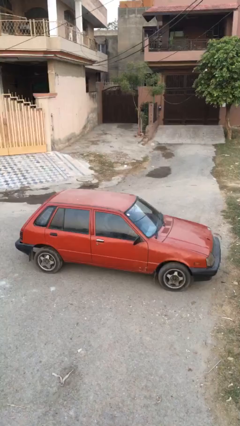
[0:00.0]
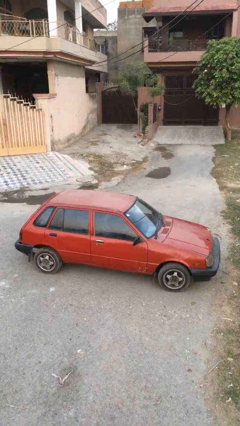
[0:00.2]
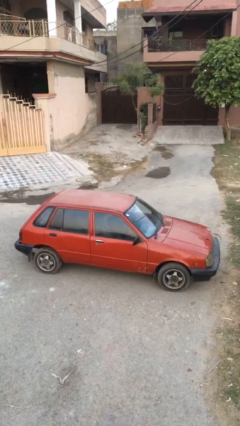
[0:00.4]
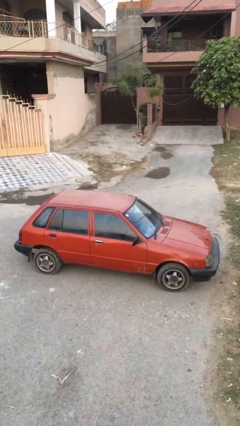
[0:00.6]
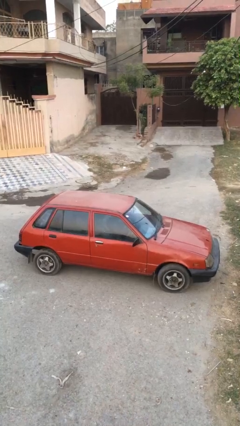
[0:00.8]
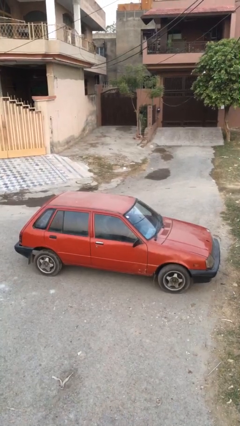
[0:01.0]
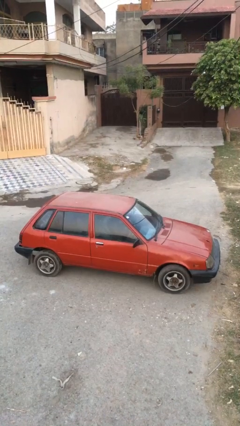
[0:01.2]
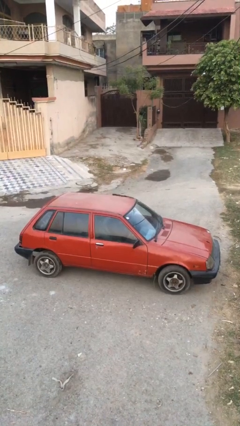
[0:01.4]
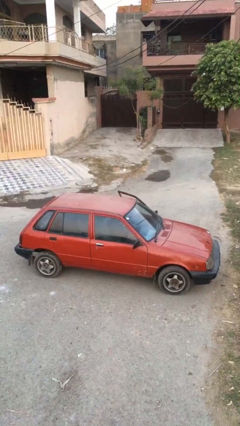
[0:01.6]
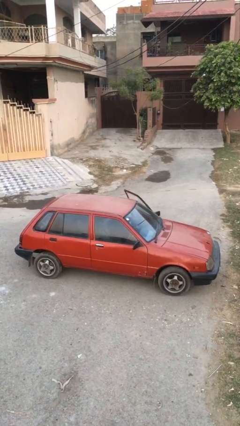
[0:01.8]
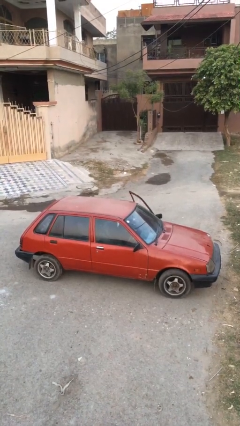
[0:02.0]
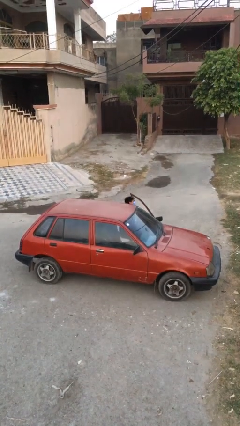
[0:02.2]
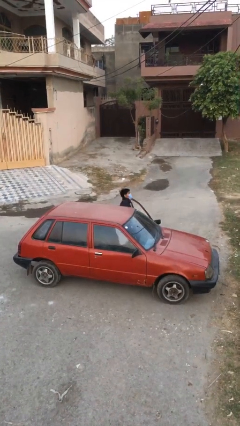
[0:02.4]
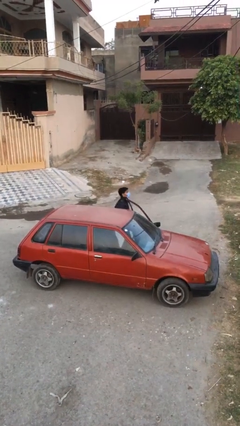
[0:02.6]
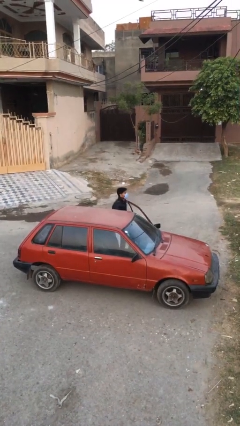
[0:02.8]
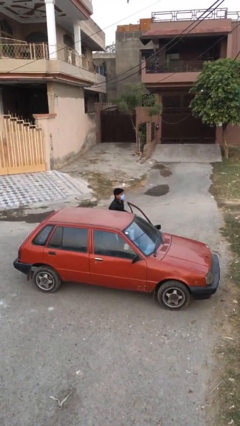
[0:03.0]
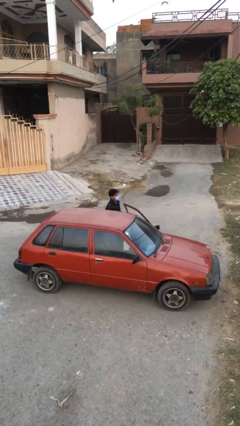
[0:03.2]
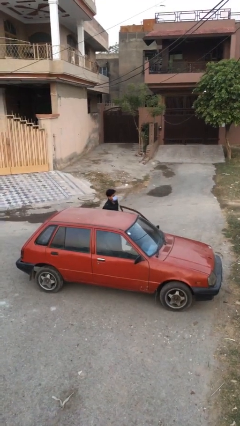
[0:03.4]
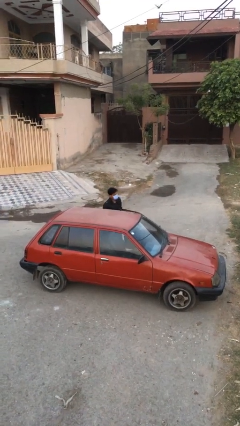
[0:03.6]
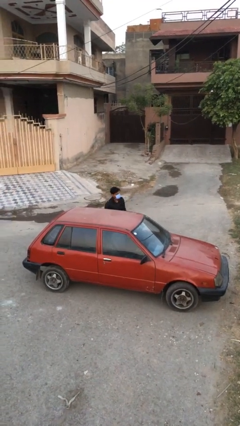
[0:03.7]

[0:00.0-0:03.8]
person exits car

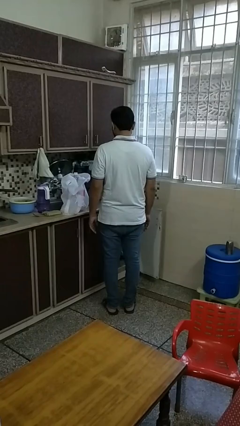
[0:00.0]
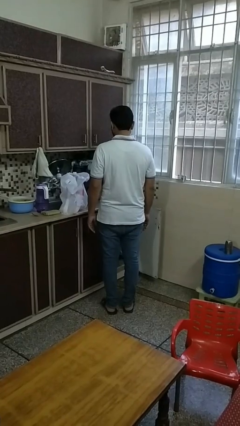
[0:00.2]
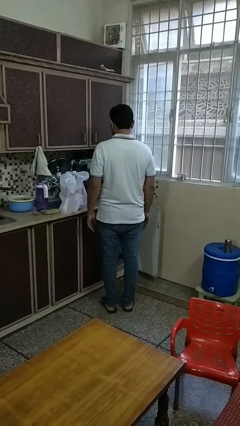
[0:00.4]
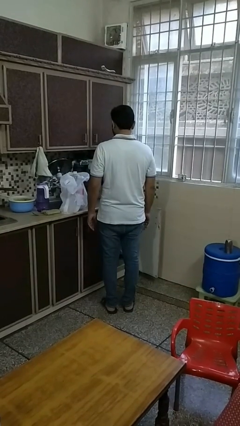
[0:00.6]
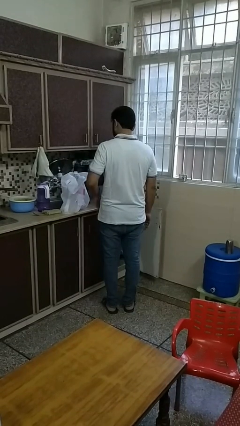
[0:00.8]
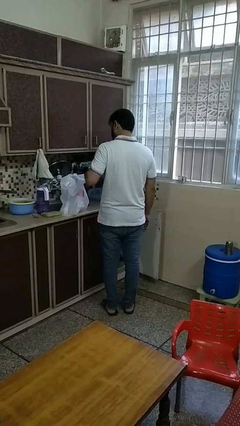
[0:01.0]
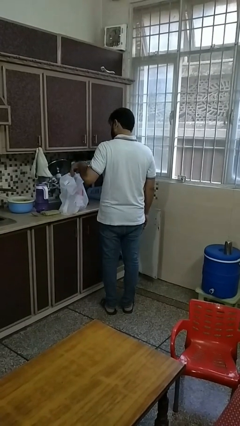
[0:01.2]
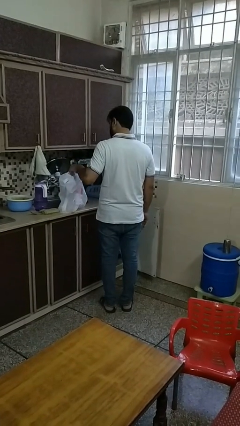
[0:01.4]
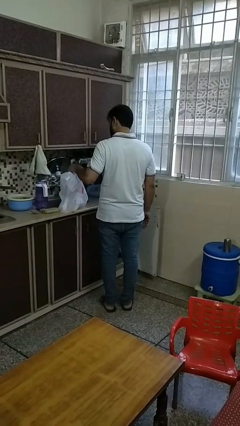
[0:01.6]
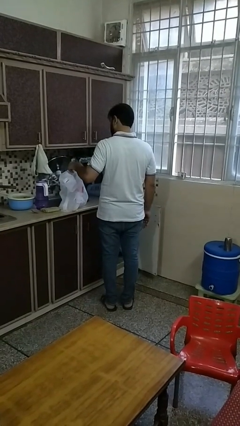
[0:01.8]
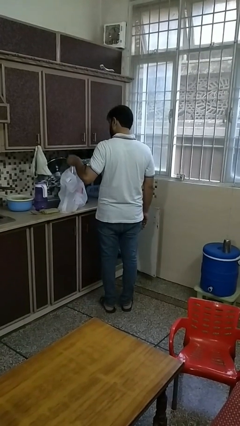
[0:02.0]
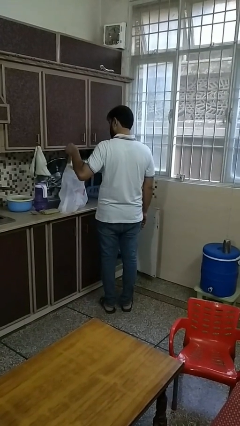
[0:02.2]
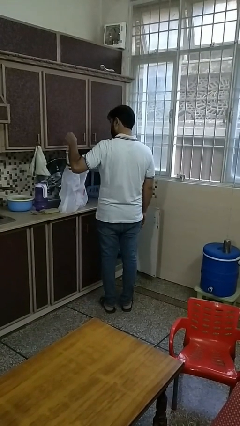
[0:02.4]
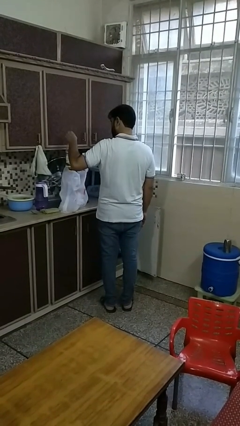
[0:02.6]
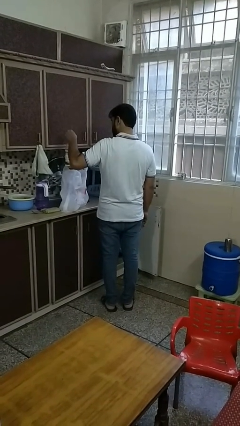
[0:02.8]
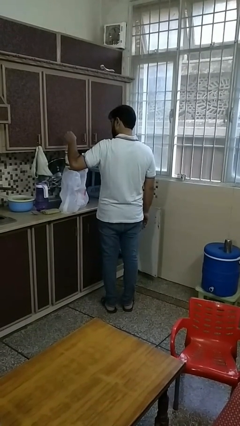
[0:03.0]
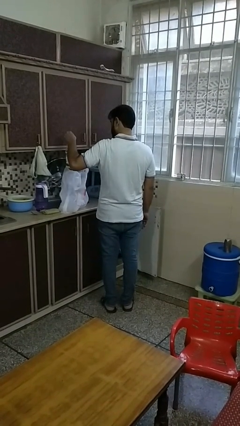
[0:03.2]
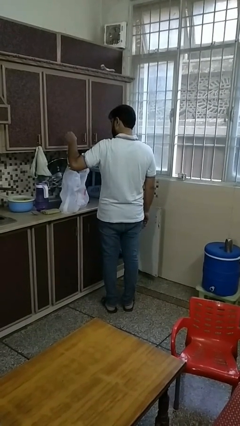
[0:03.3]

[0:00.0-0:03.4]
person takes object from bag

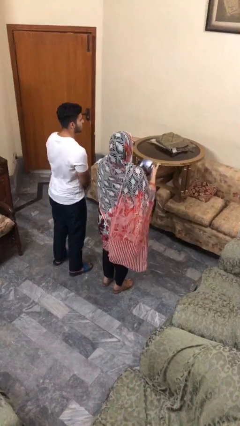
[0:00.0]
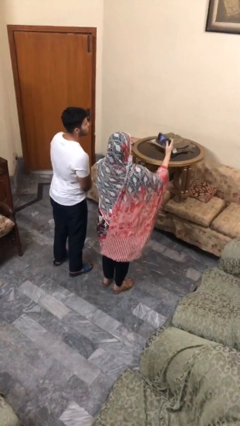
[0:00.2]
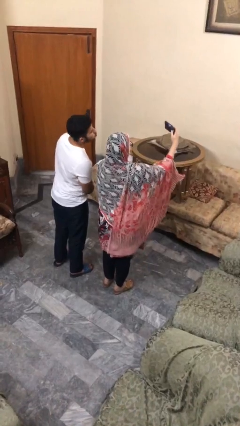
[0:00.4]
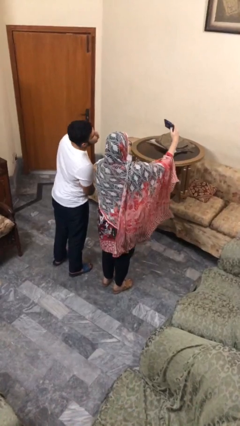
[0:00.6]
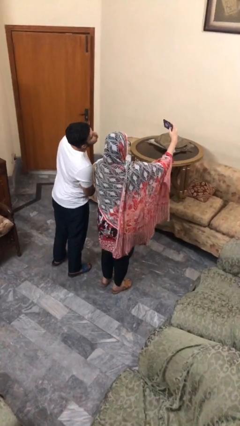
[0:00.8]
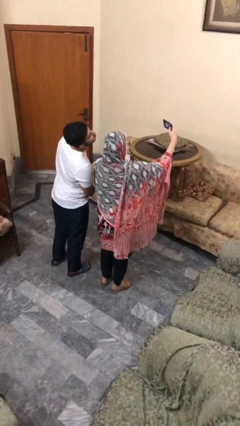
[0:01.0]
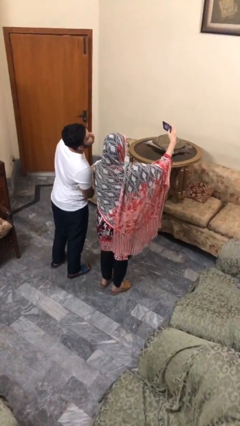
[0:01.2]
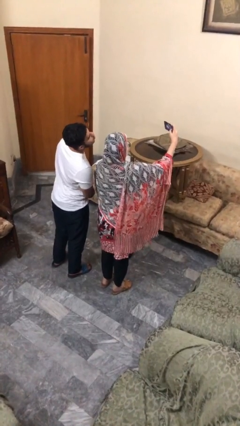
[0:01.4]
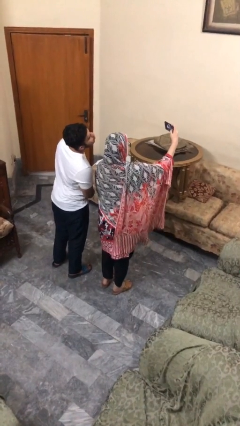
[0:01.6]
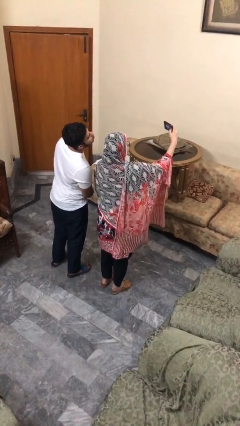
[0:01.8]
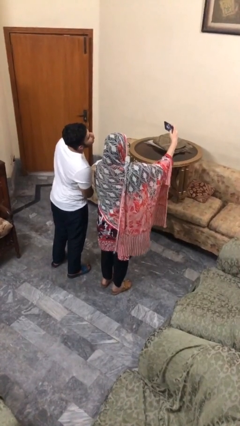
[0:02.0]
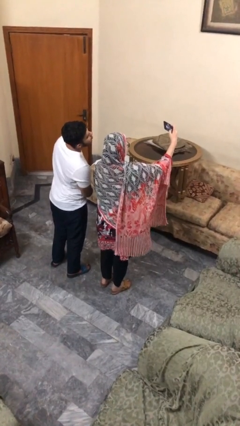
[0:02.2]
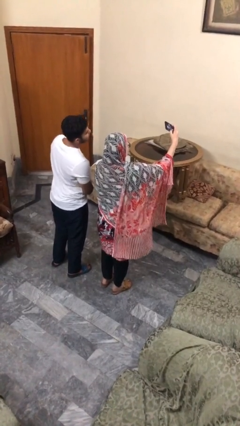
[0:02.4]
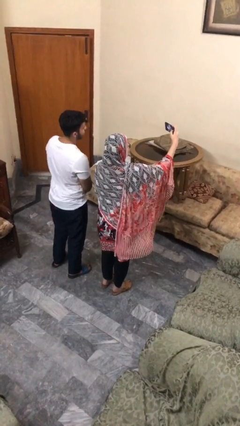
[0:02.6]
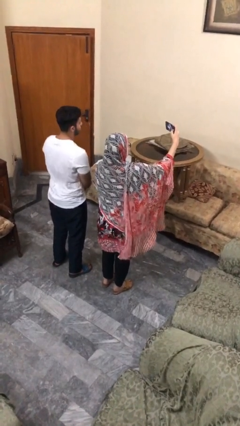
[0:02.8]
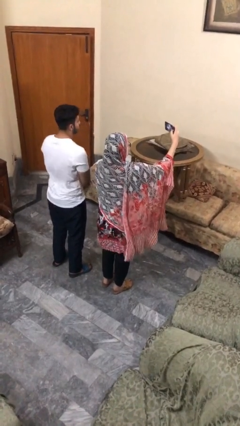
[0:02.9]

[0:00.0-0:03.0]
person takes selfie with person

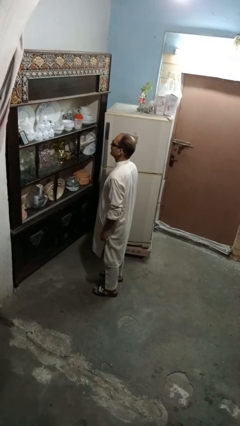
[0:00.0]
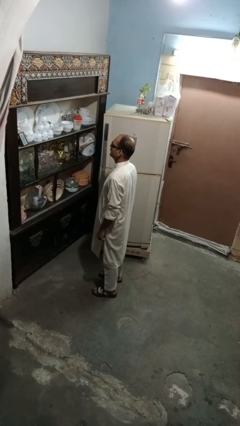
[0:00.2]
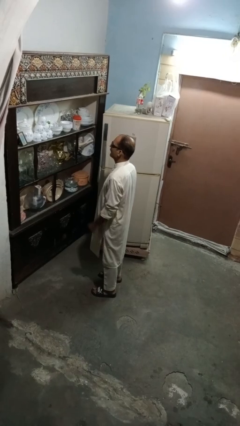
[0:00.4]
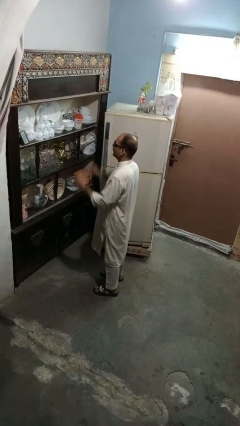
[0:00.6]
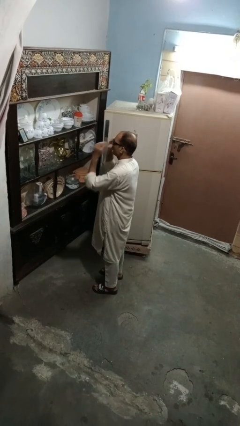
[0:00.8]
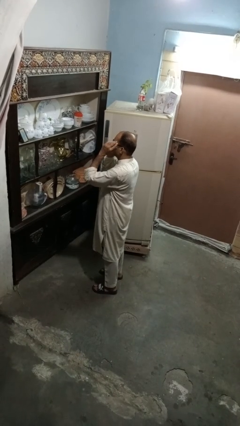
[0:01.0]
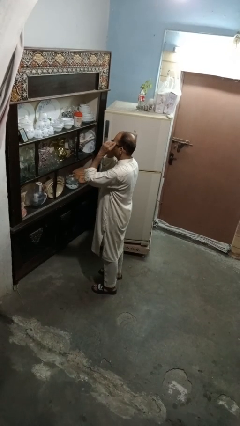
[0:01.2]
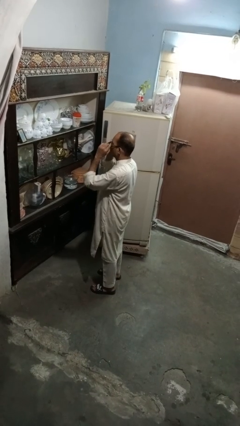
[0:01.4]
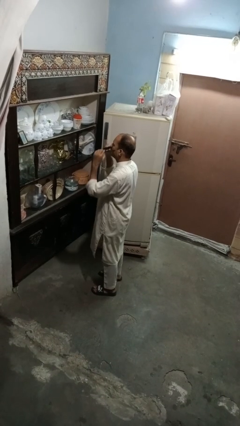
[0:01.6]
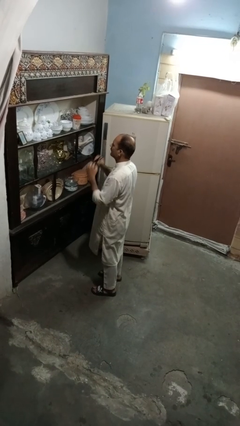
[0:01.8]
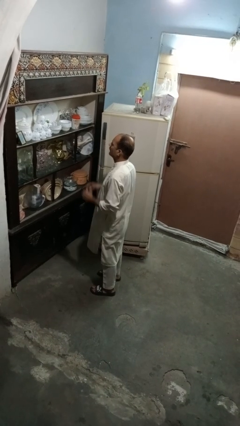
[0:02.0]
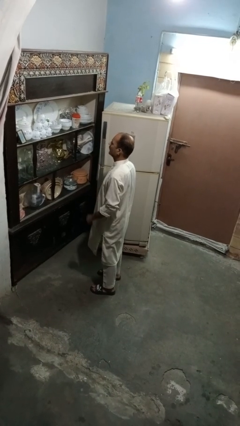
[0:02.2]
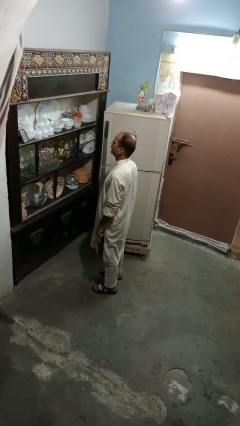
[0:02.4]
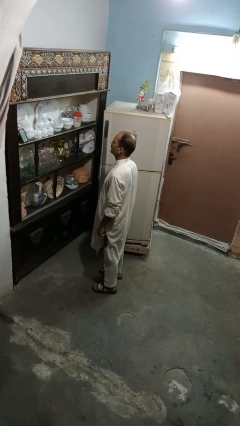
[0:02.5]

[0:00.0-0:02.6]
person takes off sunglasses

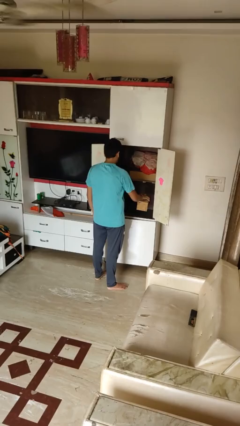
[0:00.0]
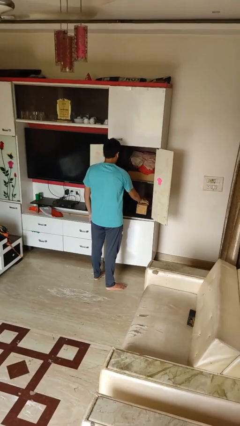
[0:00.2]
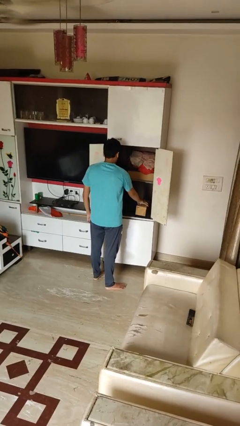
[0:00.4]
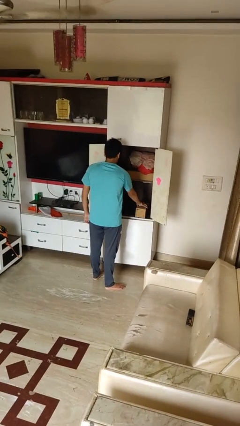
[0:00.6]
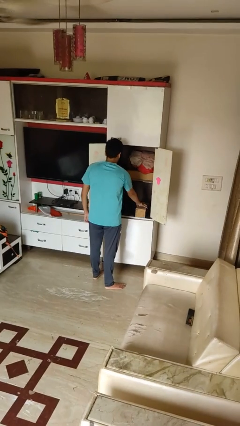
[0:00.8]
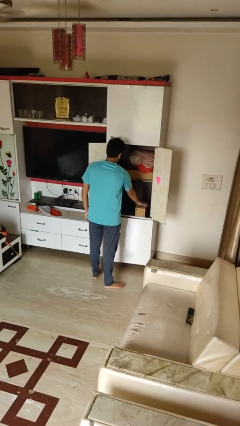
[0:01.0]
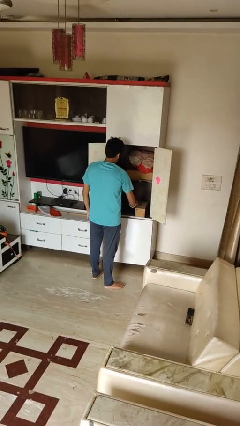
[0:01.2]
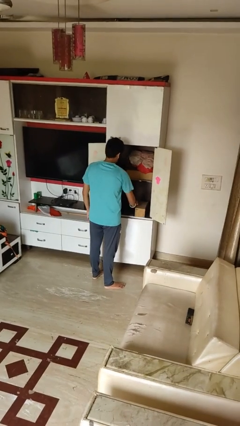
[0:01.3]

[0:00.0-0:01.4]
person puts down object into cabinet

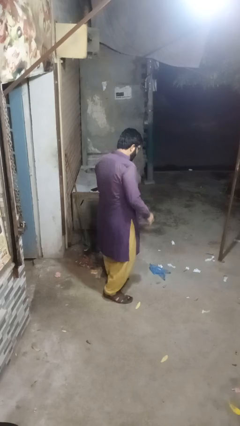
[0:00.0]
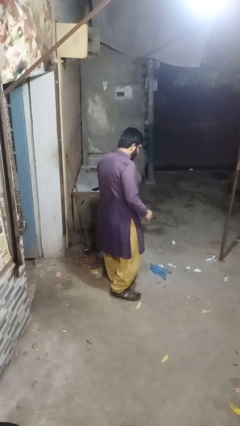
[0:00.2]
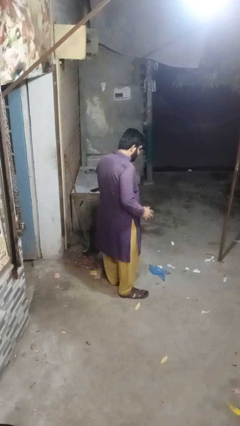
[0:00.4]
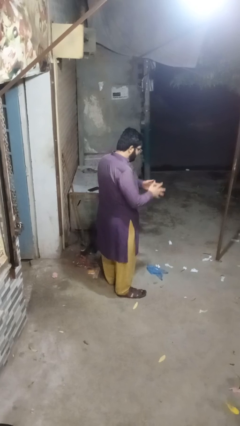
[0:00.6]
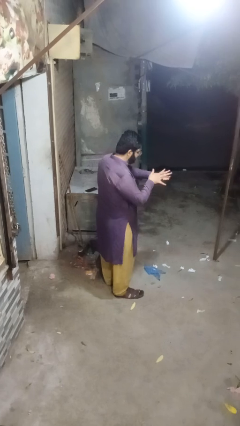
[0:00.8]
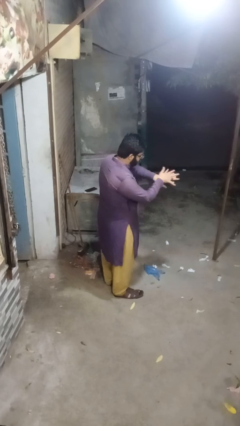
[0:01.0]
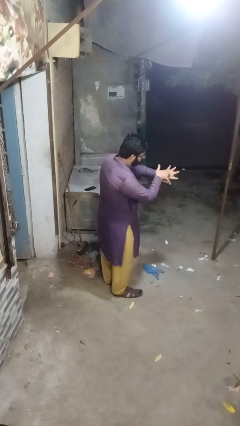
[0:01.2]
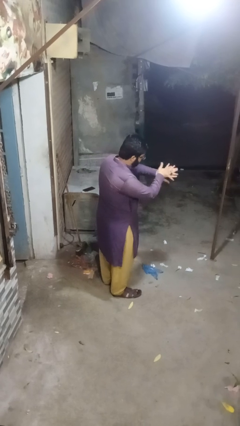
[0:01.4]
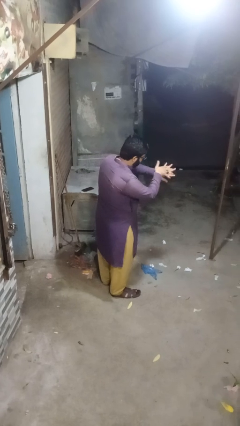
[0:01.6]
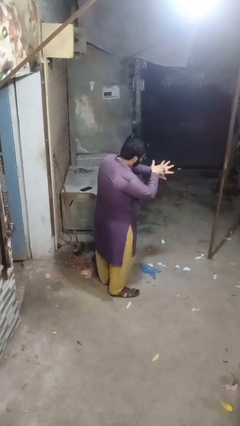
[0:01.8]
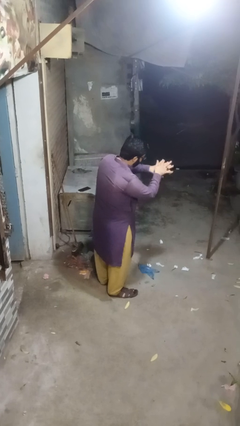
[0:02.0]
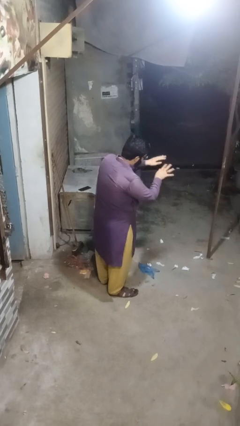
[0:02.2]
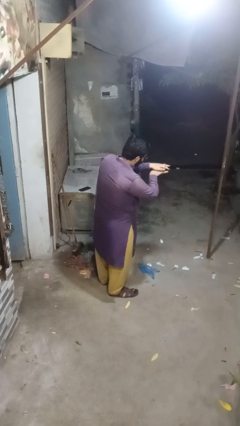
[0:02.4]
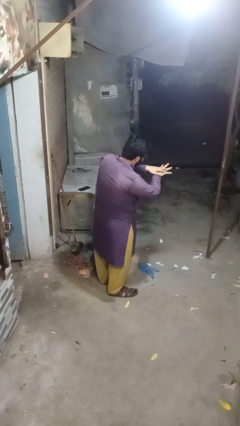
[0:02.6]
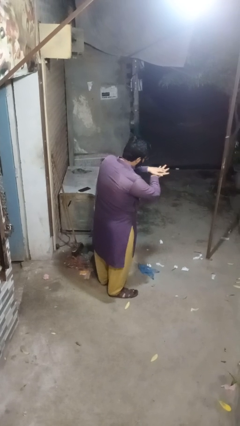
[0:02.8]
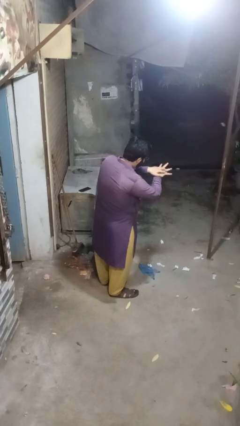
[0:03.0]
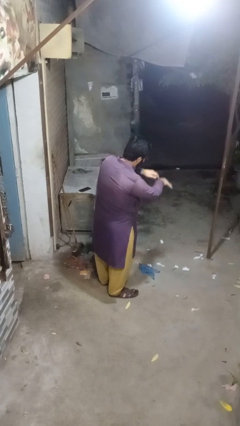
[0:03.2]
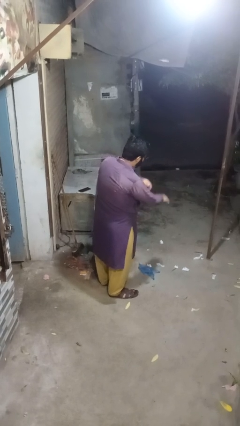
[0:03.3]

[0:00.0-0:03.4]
person cracks knuckles
